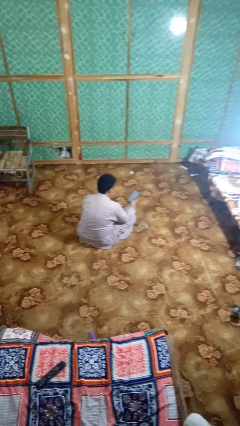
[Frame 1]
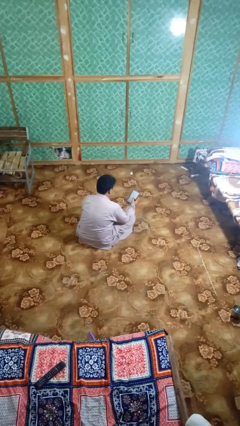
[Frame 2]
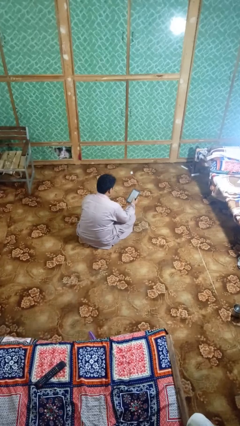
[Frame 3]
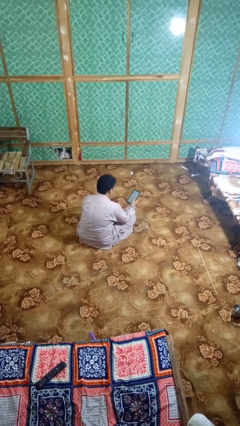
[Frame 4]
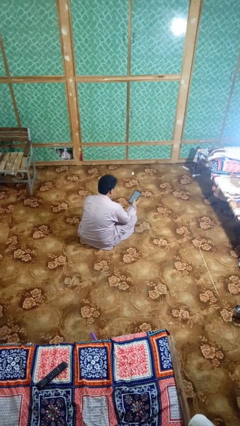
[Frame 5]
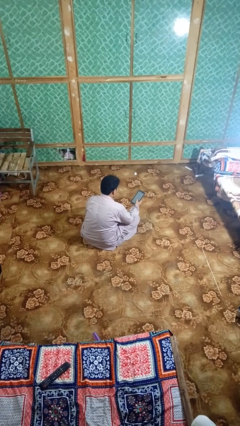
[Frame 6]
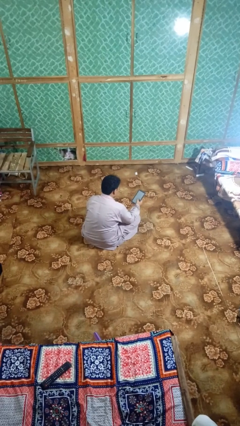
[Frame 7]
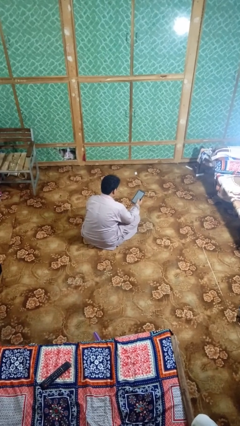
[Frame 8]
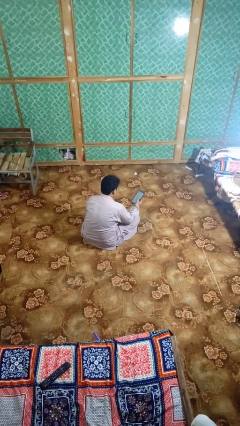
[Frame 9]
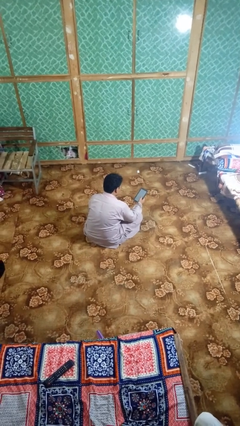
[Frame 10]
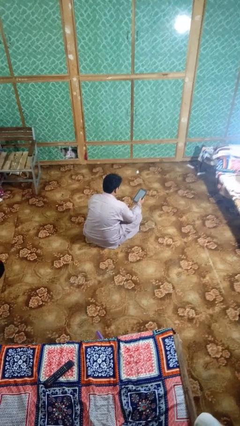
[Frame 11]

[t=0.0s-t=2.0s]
person interacts with tablet

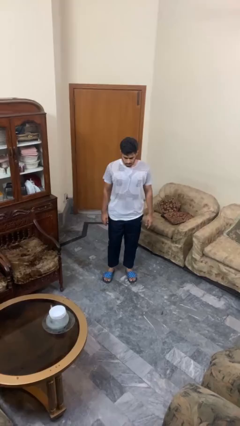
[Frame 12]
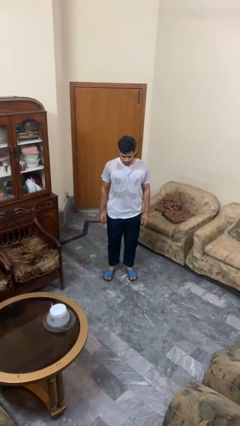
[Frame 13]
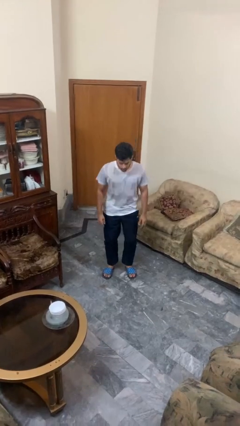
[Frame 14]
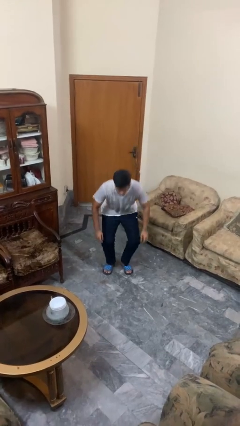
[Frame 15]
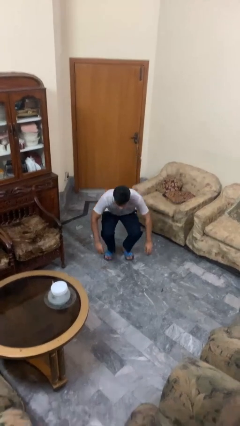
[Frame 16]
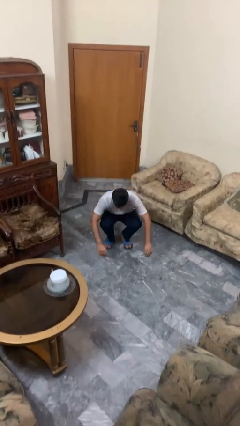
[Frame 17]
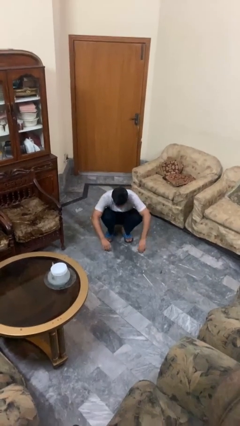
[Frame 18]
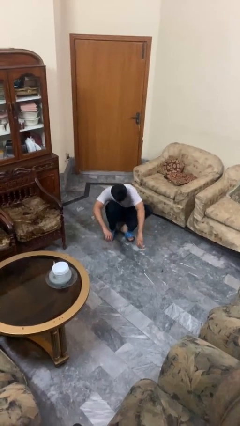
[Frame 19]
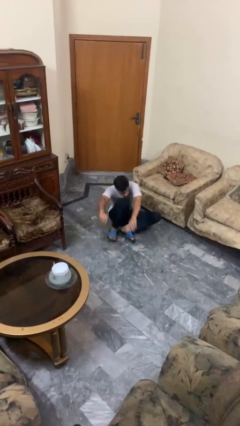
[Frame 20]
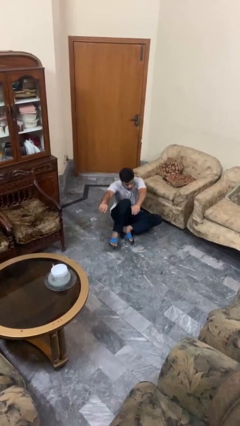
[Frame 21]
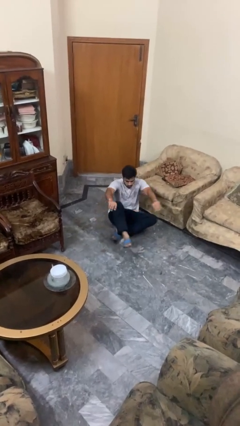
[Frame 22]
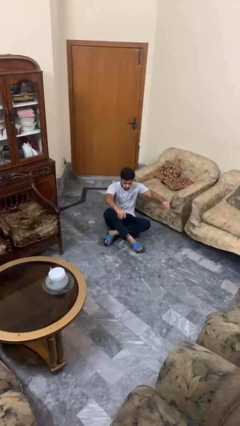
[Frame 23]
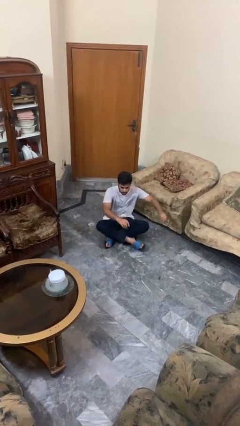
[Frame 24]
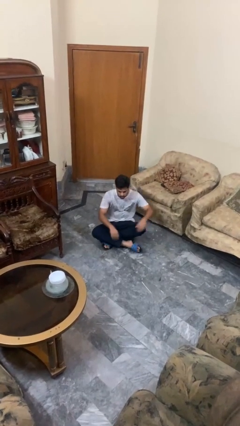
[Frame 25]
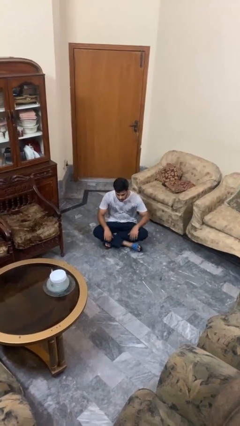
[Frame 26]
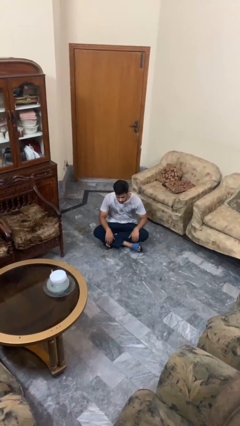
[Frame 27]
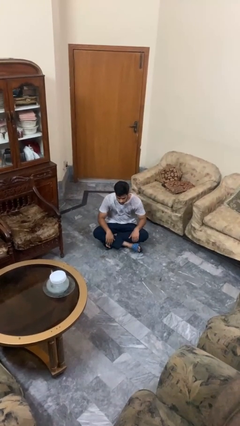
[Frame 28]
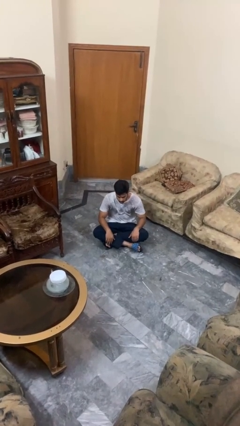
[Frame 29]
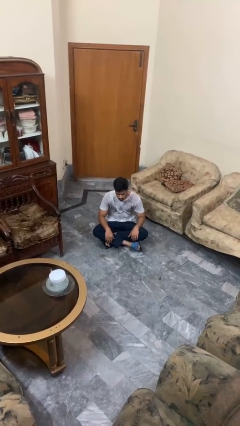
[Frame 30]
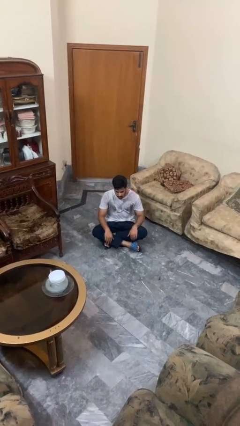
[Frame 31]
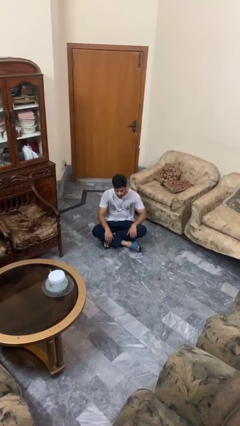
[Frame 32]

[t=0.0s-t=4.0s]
person sits crisscross

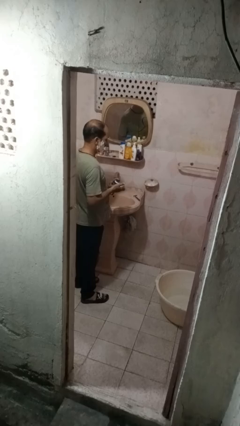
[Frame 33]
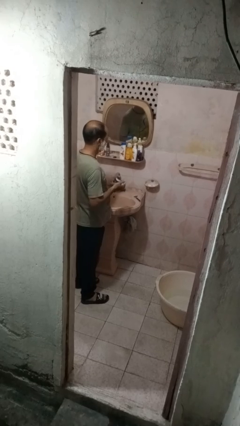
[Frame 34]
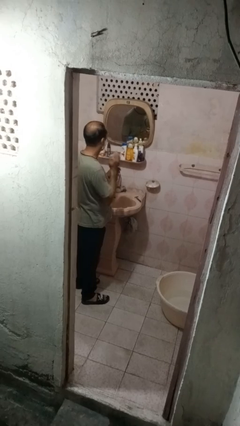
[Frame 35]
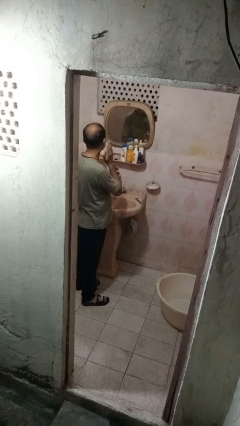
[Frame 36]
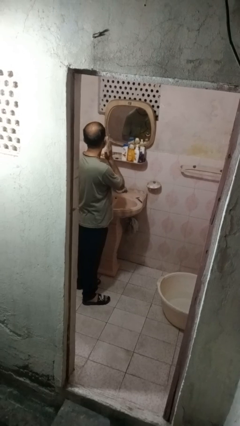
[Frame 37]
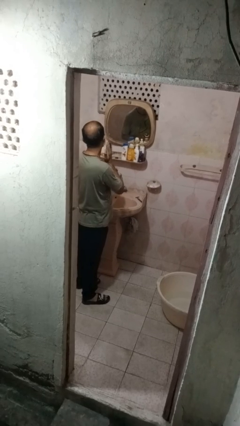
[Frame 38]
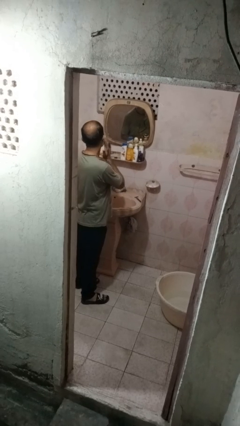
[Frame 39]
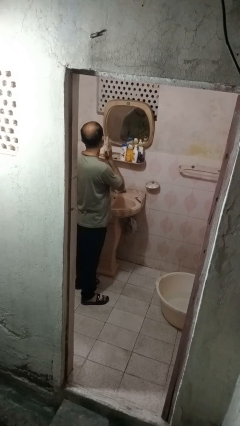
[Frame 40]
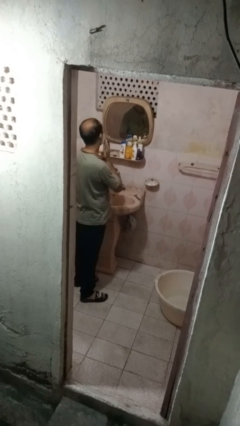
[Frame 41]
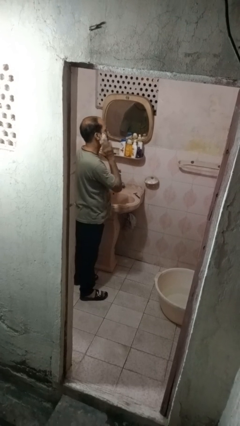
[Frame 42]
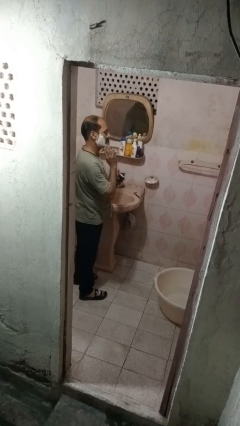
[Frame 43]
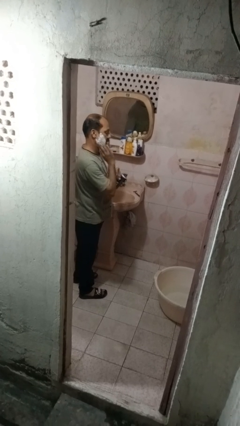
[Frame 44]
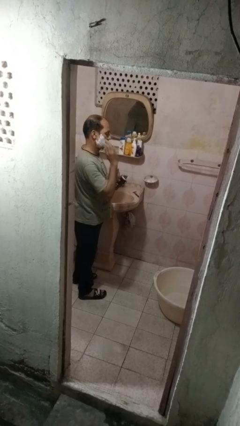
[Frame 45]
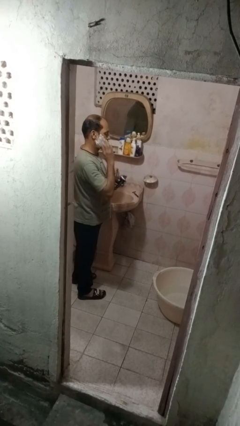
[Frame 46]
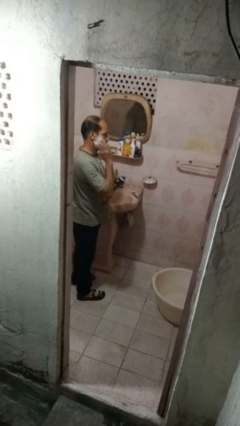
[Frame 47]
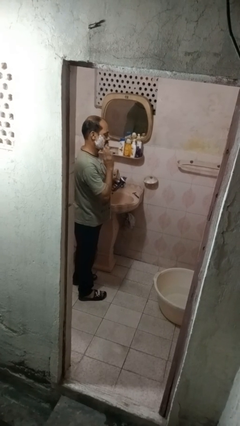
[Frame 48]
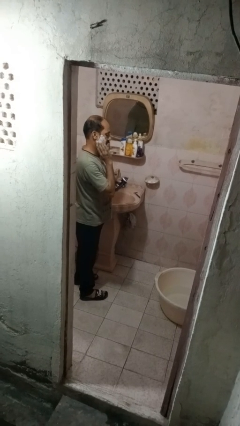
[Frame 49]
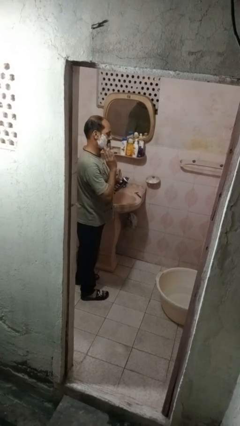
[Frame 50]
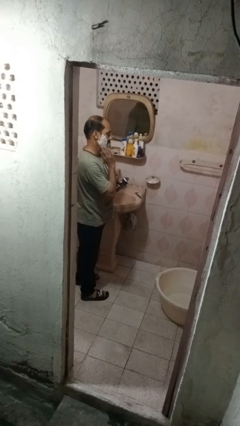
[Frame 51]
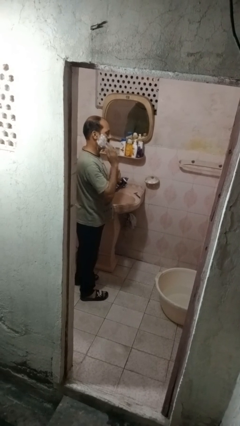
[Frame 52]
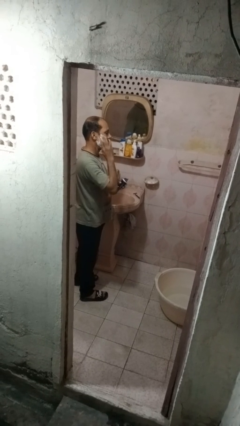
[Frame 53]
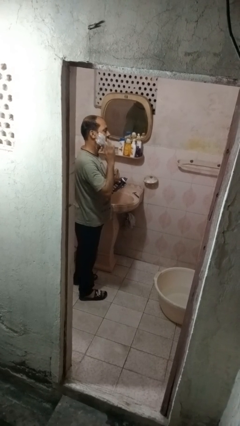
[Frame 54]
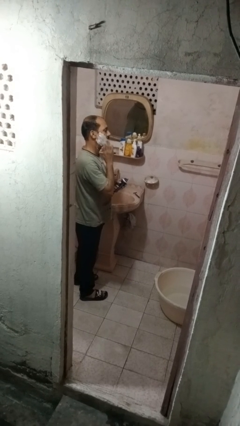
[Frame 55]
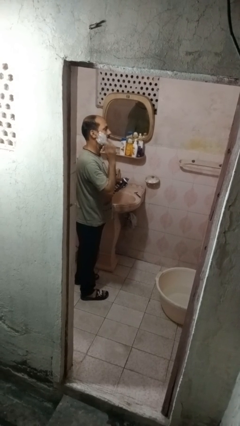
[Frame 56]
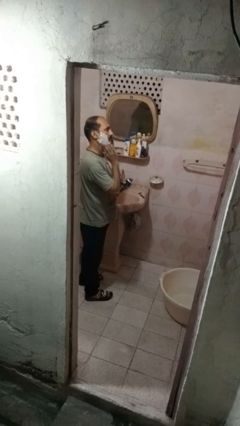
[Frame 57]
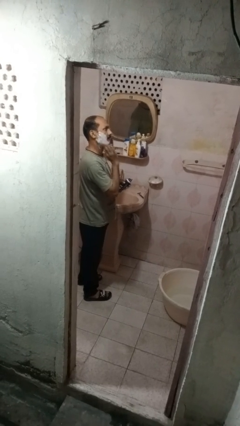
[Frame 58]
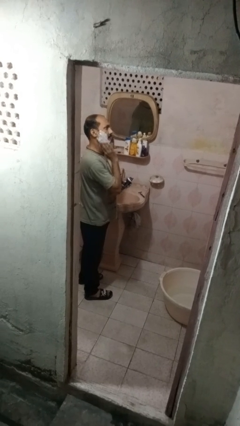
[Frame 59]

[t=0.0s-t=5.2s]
person applies shaving cream

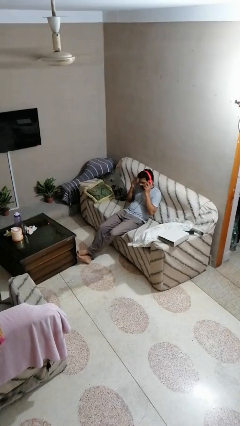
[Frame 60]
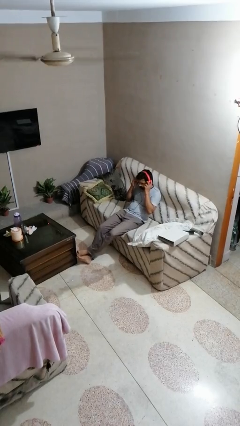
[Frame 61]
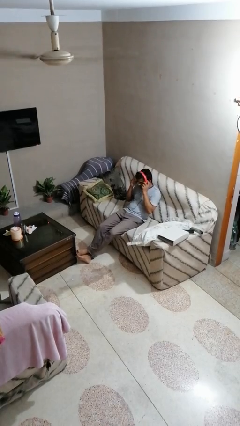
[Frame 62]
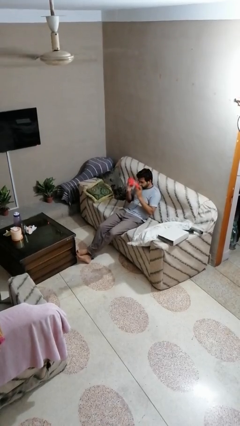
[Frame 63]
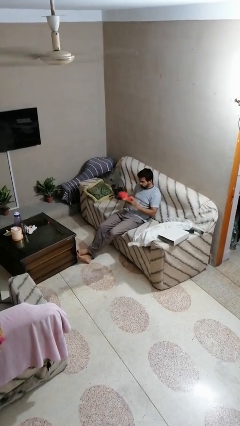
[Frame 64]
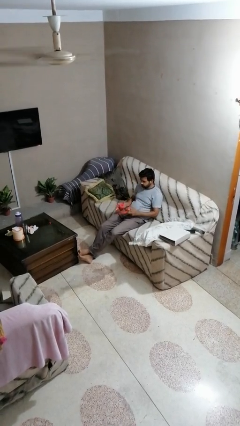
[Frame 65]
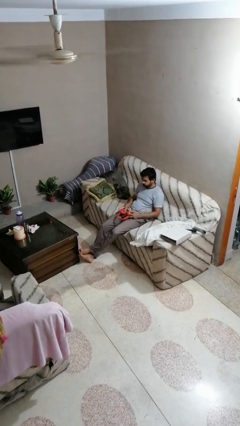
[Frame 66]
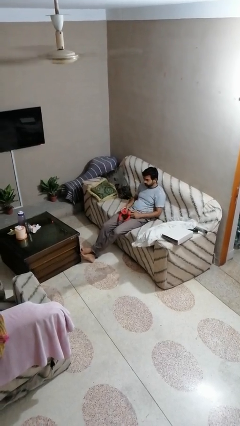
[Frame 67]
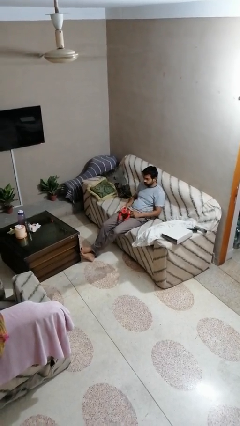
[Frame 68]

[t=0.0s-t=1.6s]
person takes off headphones

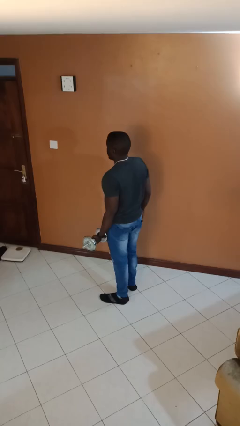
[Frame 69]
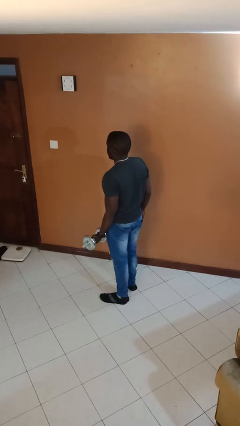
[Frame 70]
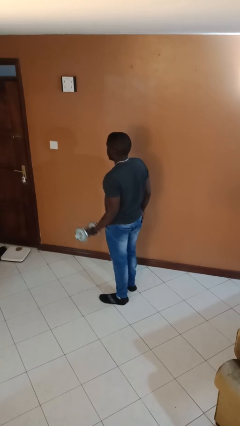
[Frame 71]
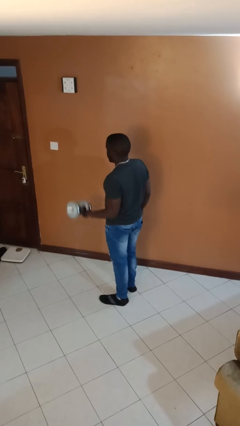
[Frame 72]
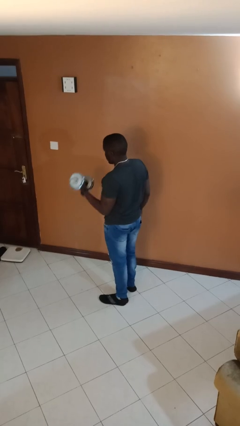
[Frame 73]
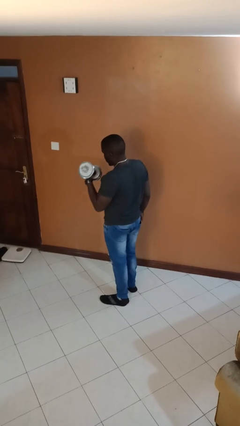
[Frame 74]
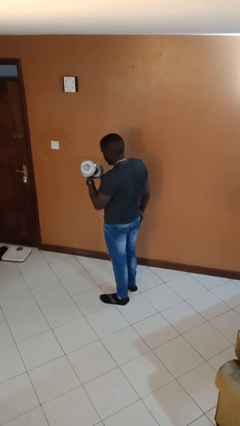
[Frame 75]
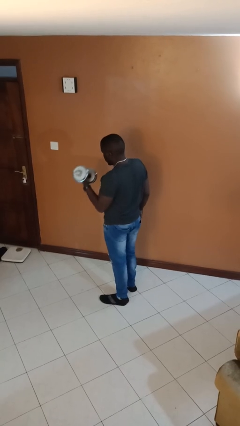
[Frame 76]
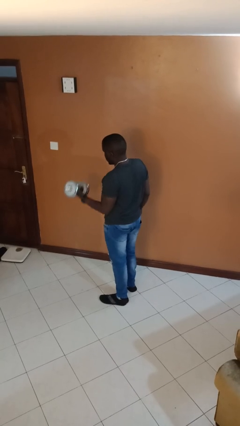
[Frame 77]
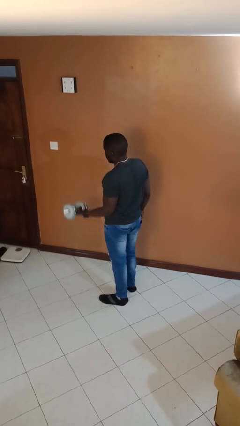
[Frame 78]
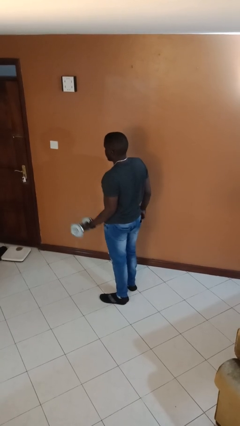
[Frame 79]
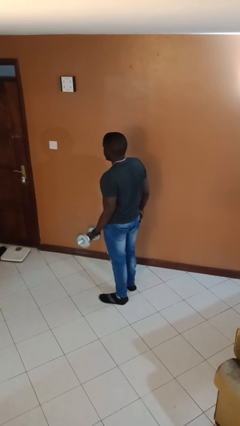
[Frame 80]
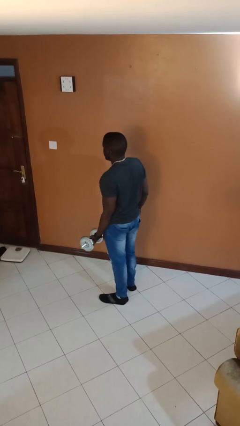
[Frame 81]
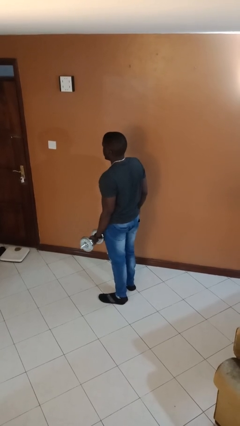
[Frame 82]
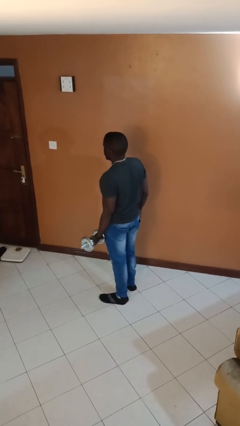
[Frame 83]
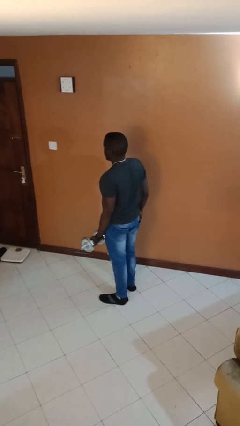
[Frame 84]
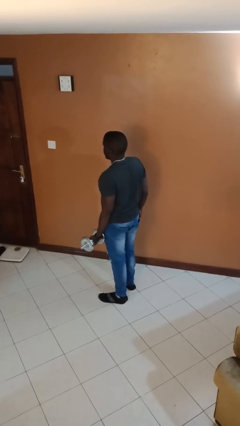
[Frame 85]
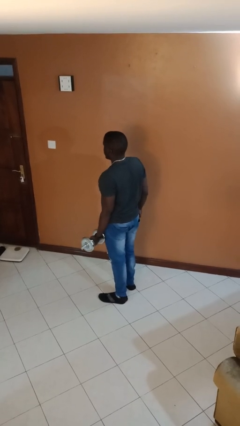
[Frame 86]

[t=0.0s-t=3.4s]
person lifts dumbbells

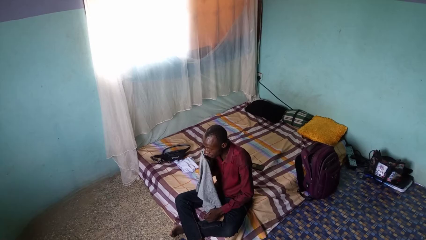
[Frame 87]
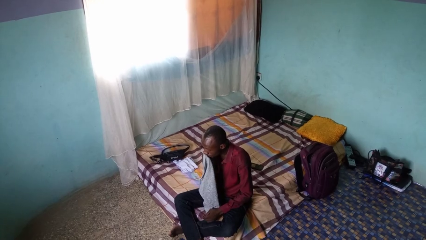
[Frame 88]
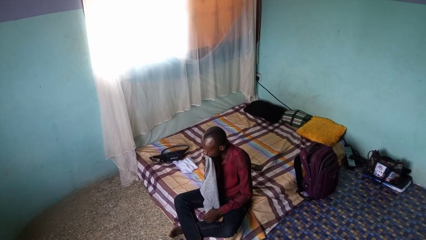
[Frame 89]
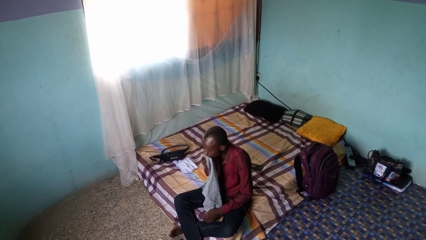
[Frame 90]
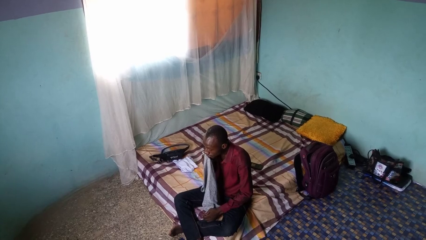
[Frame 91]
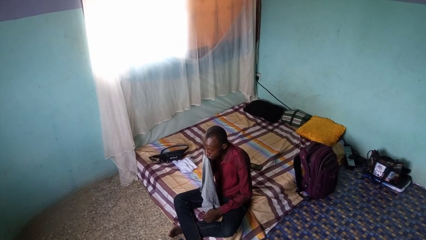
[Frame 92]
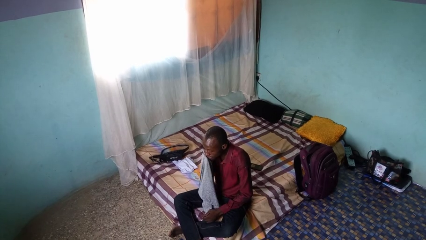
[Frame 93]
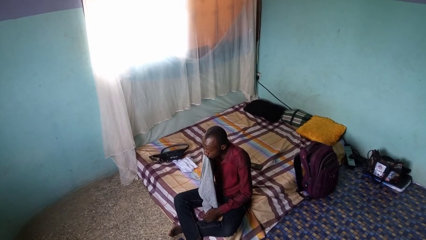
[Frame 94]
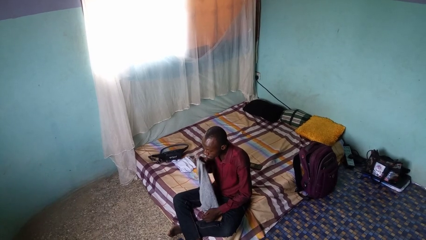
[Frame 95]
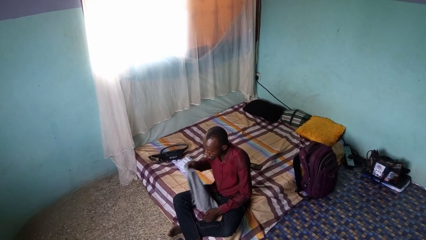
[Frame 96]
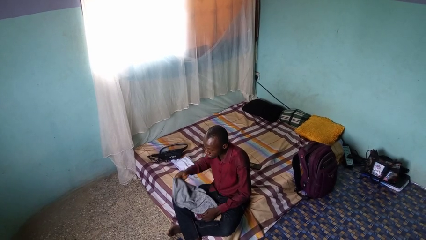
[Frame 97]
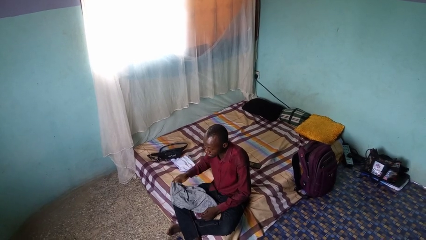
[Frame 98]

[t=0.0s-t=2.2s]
person wipes mouth with napkin
